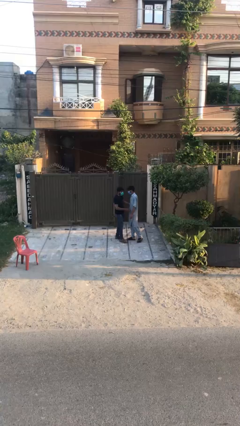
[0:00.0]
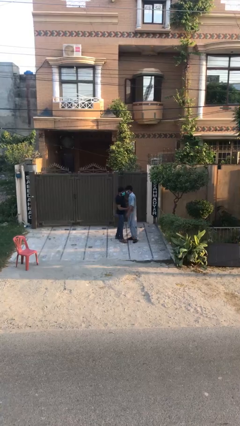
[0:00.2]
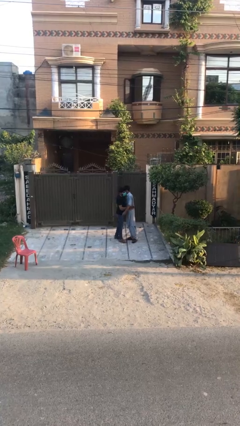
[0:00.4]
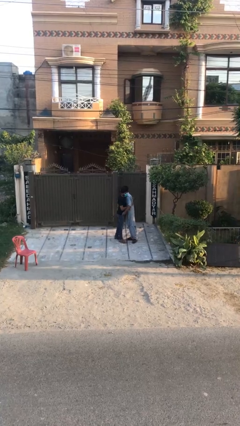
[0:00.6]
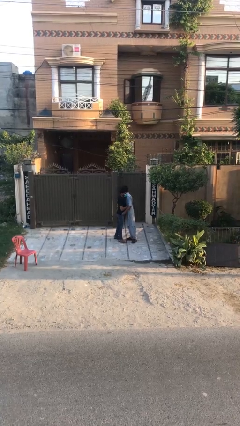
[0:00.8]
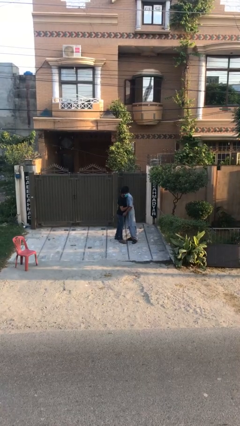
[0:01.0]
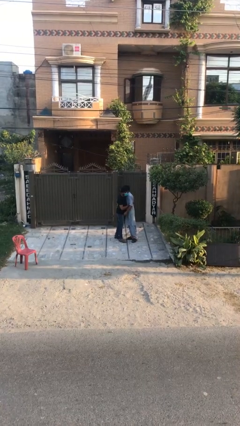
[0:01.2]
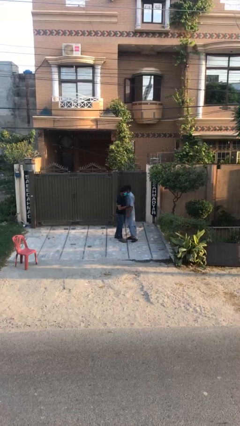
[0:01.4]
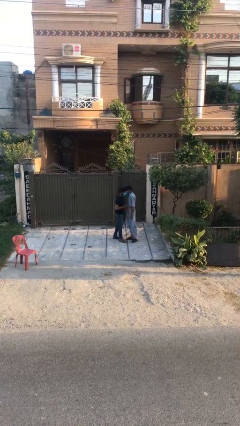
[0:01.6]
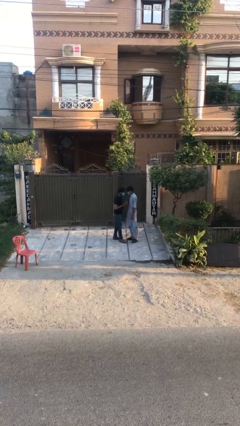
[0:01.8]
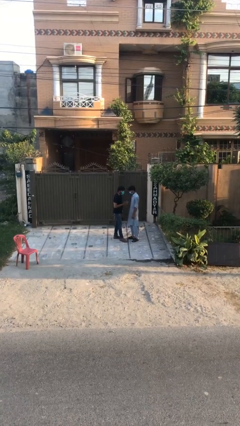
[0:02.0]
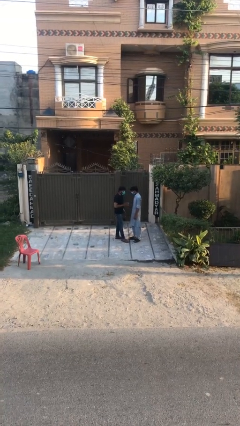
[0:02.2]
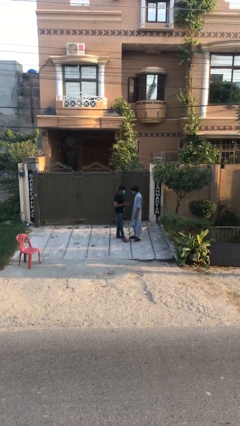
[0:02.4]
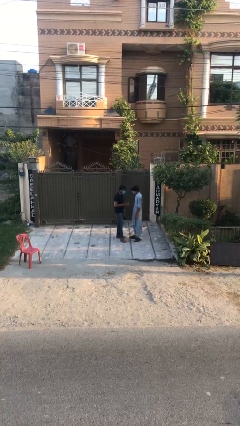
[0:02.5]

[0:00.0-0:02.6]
person embraces person

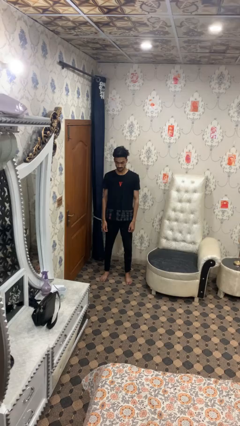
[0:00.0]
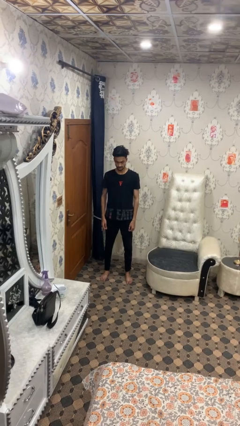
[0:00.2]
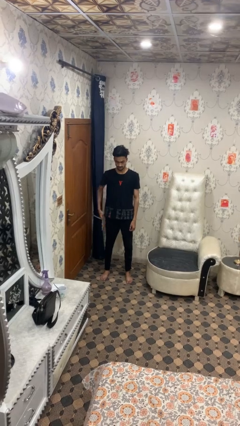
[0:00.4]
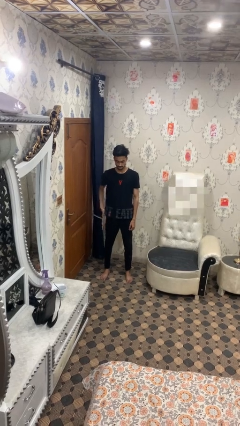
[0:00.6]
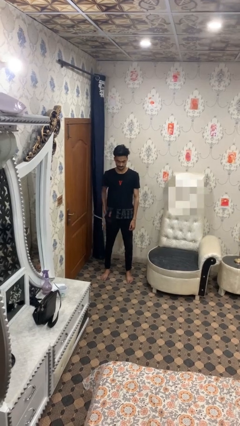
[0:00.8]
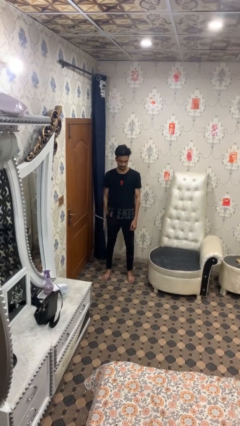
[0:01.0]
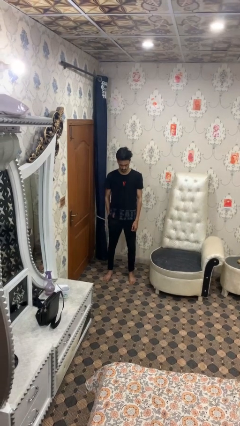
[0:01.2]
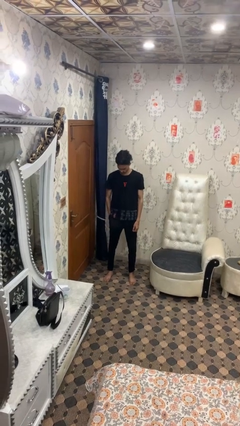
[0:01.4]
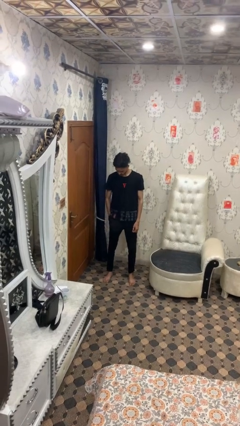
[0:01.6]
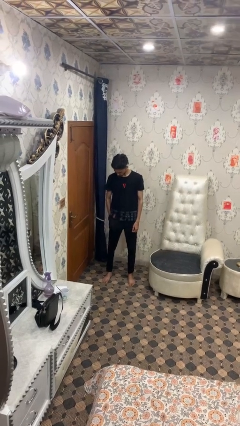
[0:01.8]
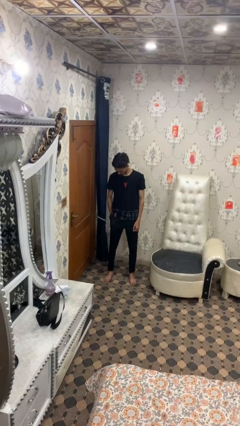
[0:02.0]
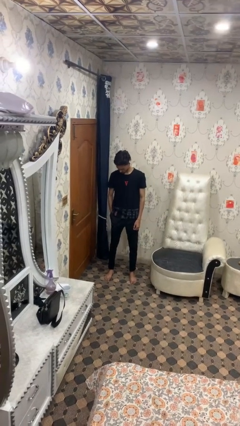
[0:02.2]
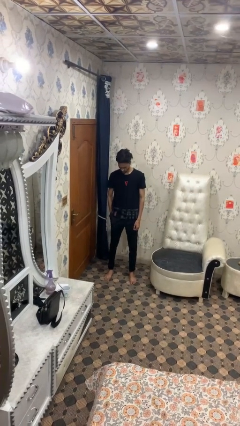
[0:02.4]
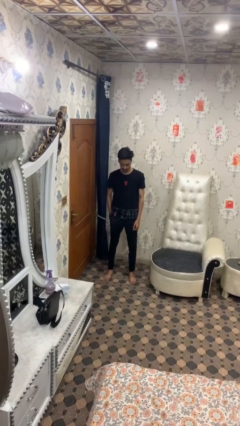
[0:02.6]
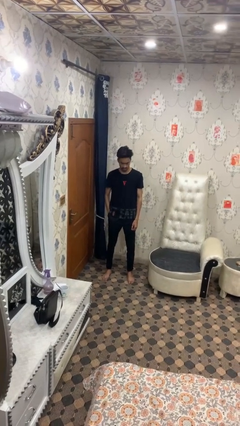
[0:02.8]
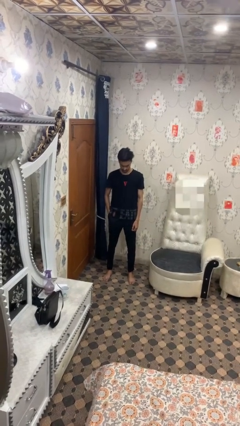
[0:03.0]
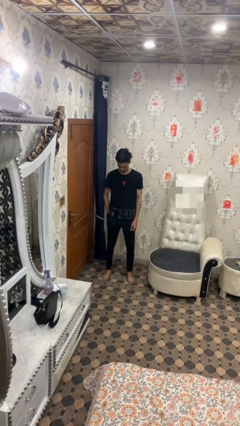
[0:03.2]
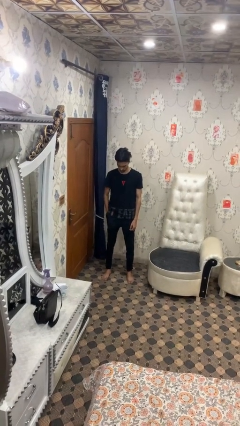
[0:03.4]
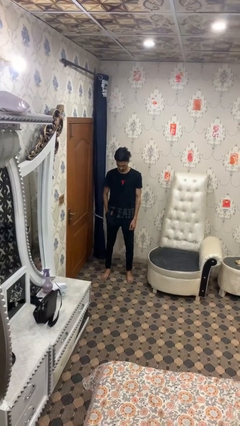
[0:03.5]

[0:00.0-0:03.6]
person puts hands in back pockets

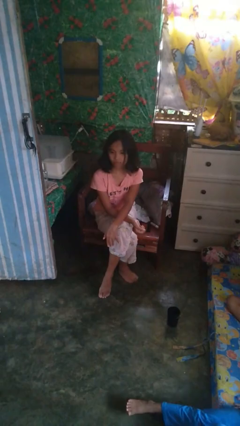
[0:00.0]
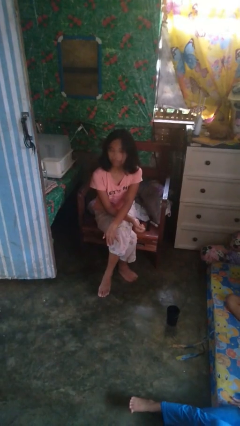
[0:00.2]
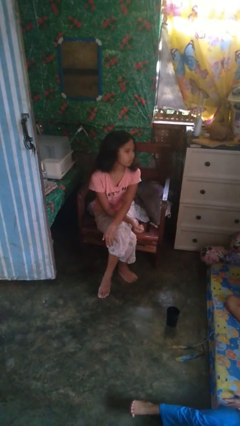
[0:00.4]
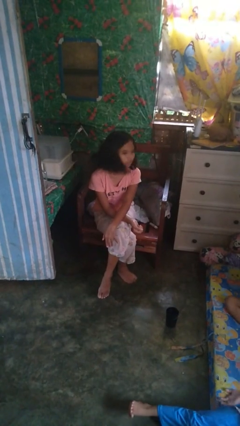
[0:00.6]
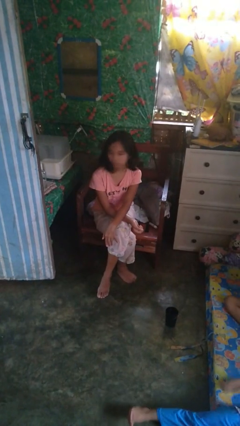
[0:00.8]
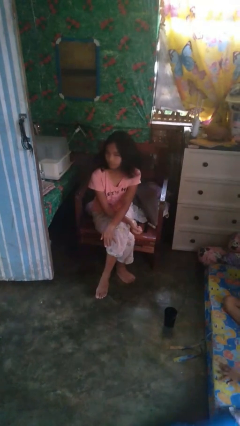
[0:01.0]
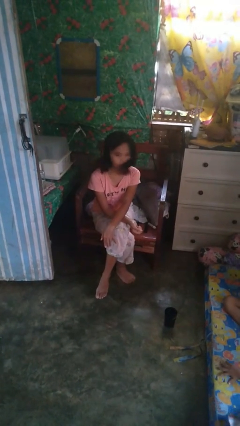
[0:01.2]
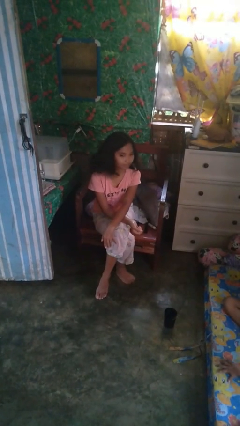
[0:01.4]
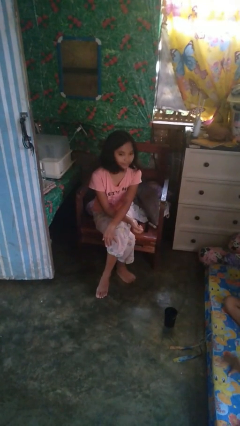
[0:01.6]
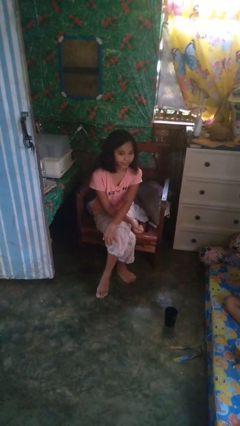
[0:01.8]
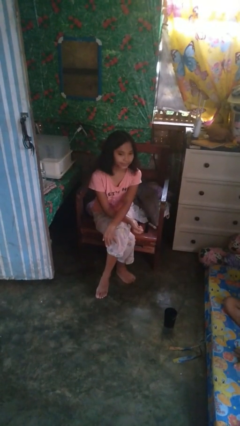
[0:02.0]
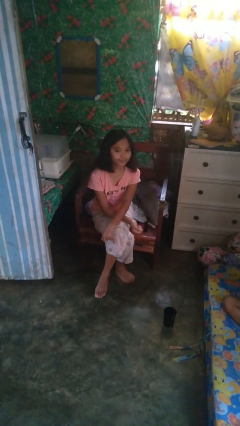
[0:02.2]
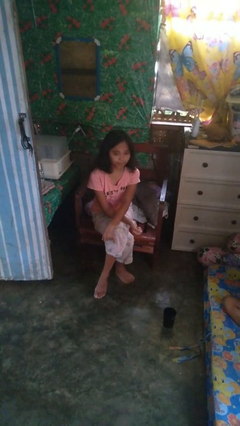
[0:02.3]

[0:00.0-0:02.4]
person shakes head

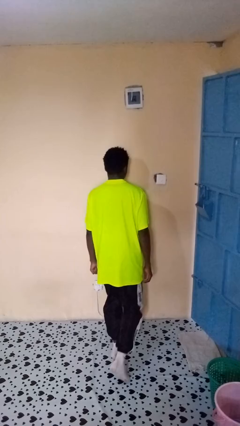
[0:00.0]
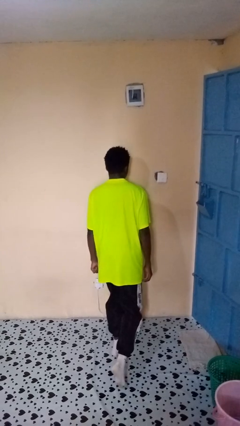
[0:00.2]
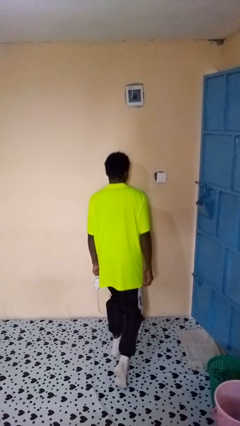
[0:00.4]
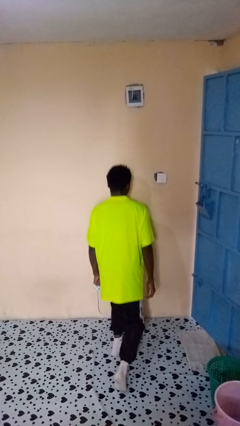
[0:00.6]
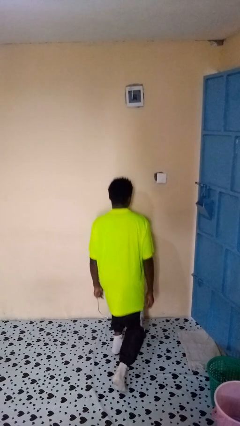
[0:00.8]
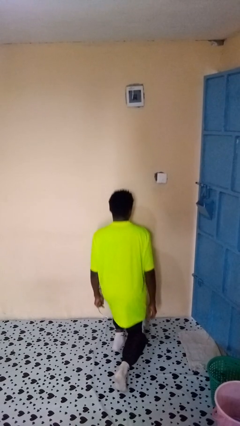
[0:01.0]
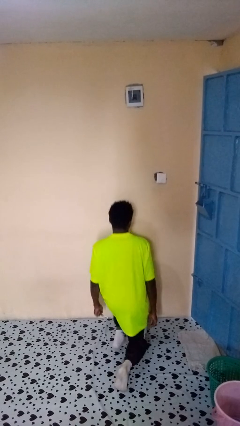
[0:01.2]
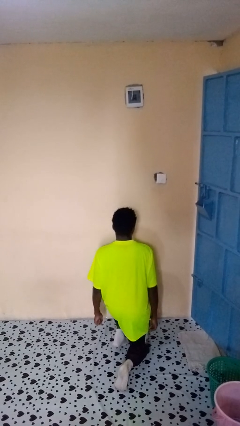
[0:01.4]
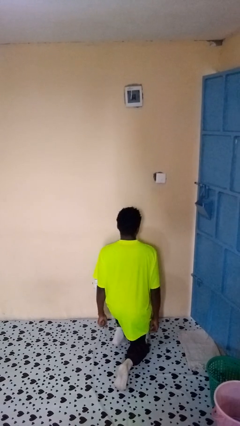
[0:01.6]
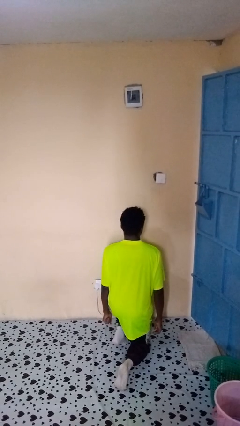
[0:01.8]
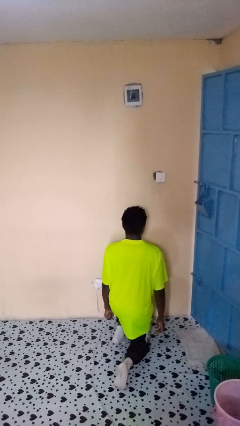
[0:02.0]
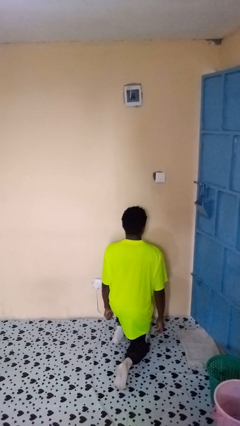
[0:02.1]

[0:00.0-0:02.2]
person kneels

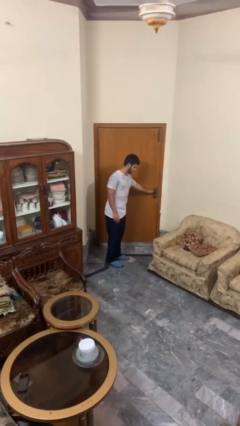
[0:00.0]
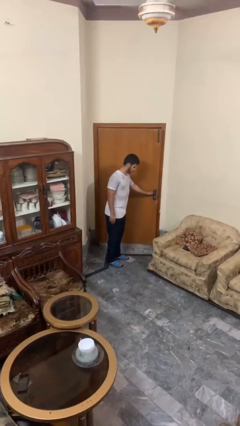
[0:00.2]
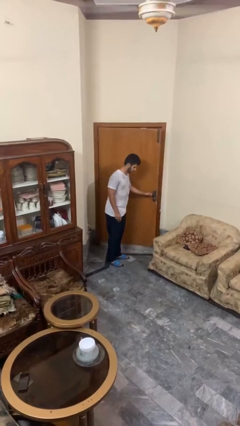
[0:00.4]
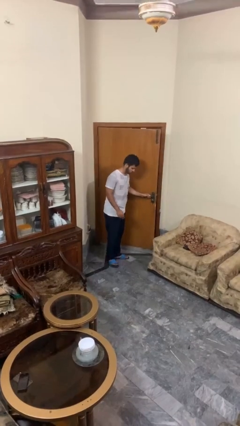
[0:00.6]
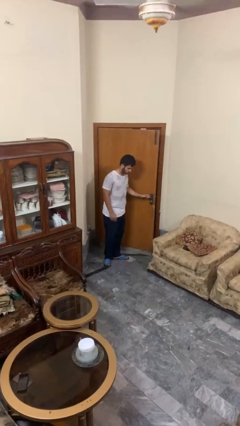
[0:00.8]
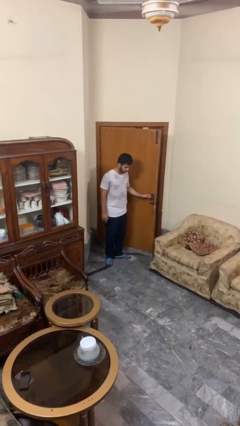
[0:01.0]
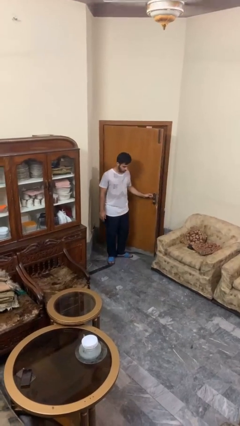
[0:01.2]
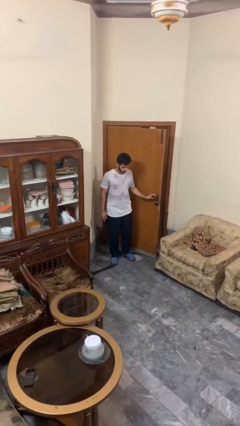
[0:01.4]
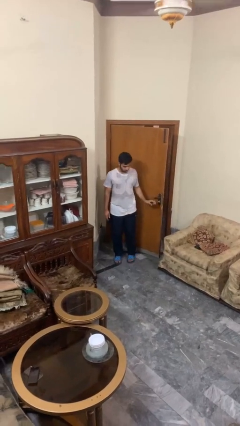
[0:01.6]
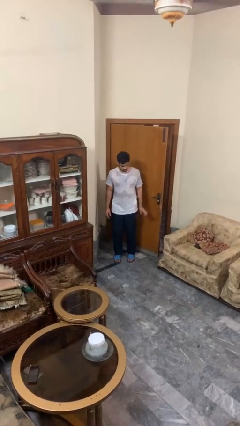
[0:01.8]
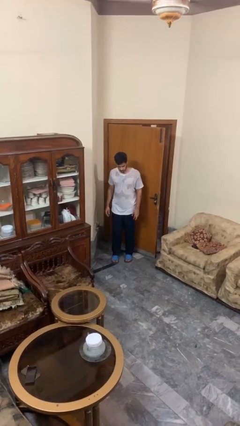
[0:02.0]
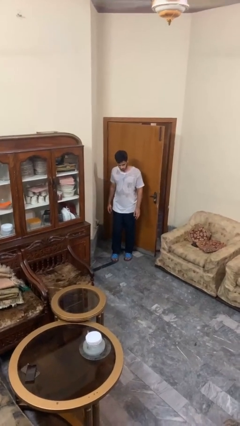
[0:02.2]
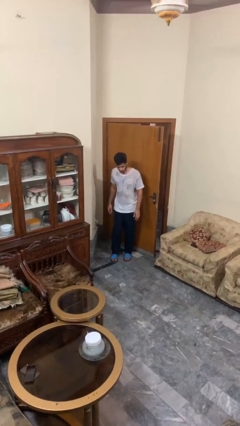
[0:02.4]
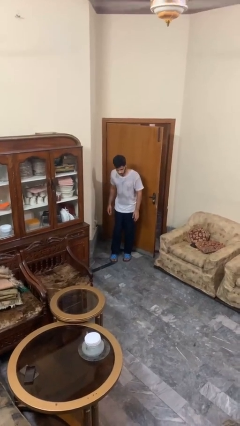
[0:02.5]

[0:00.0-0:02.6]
person opens facility door

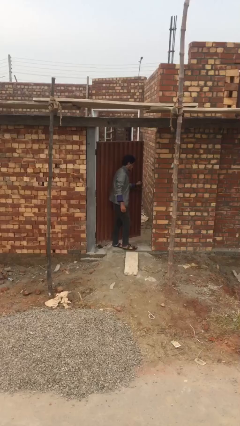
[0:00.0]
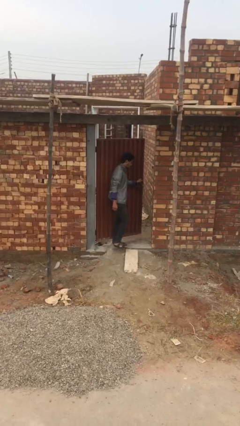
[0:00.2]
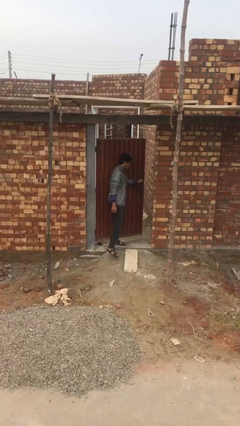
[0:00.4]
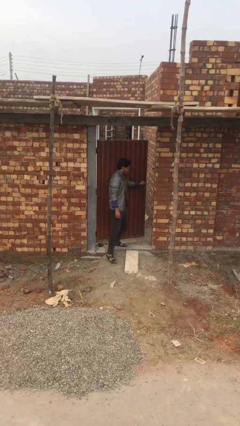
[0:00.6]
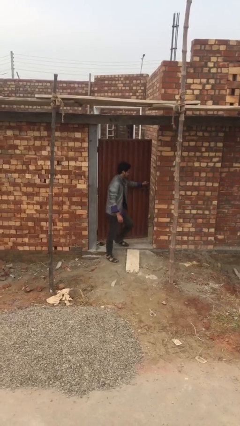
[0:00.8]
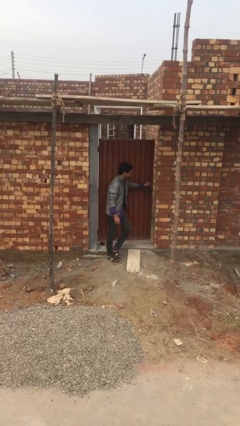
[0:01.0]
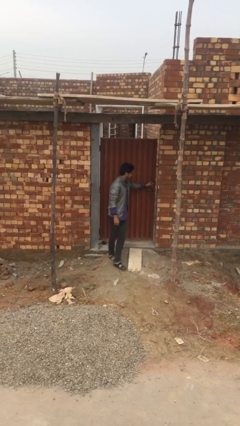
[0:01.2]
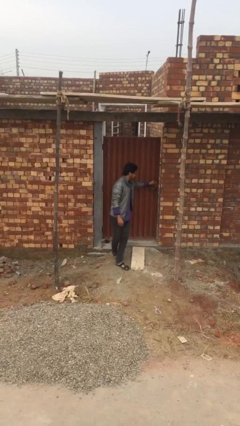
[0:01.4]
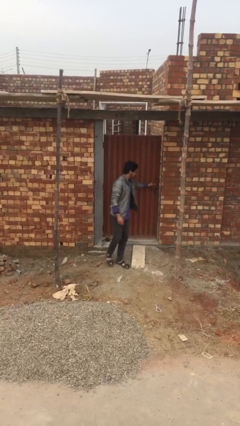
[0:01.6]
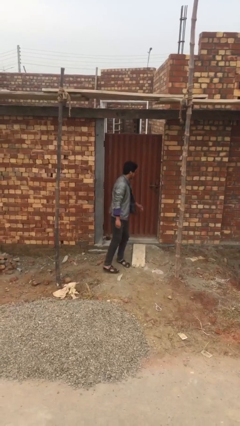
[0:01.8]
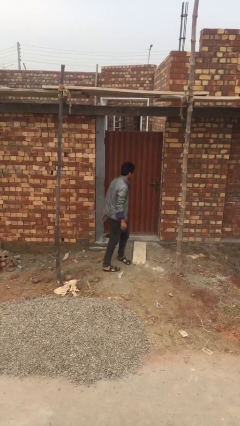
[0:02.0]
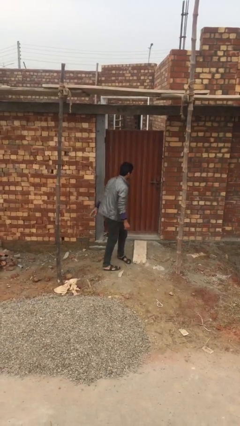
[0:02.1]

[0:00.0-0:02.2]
person closes facility door

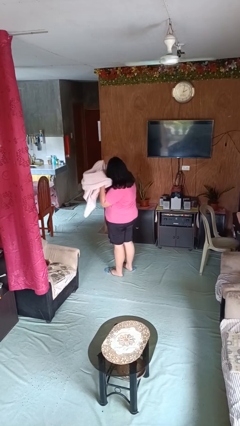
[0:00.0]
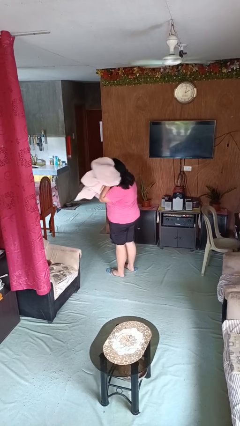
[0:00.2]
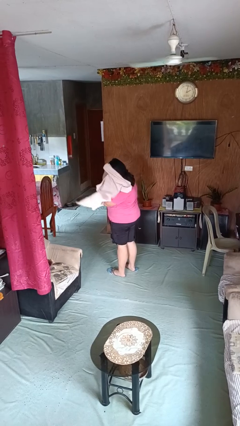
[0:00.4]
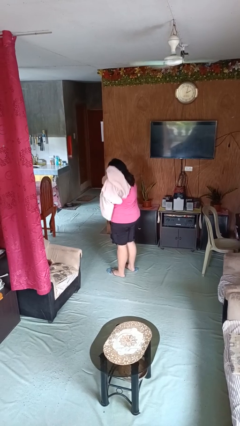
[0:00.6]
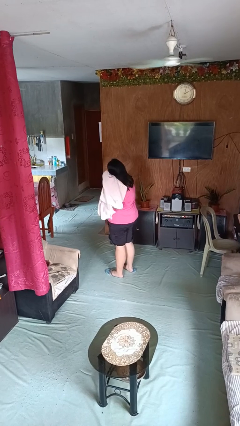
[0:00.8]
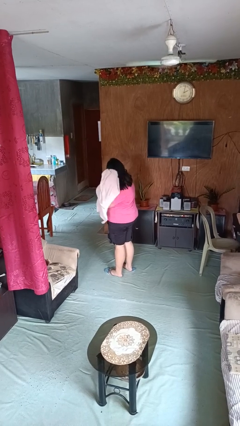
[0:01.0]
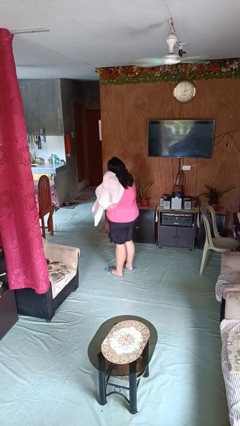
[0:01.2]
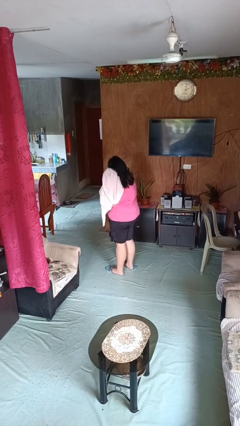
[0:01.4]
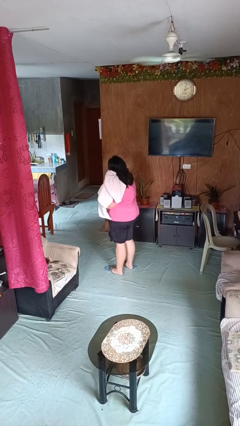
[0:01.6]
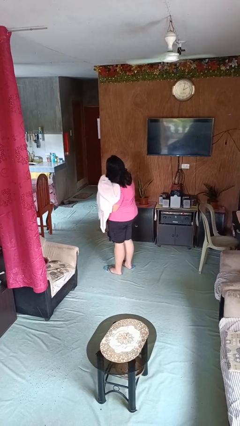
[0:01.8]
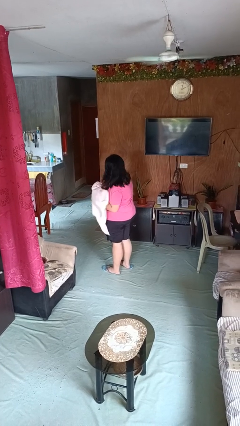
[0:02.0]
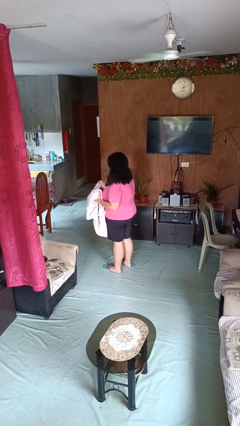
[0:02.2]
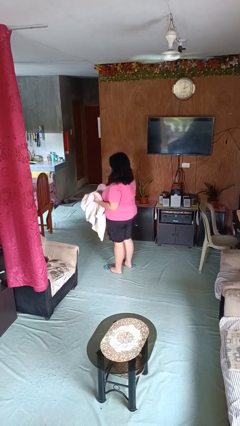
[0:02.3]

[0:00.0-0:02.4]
person dries hair with towel
